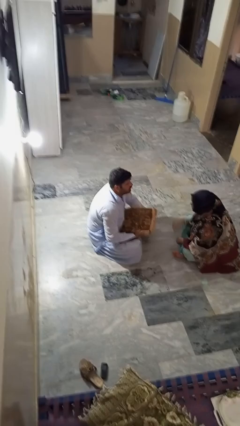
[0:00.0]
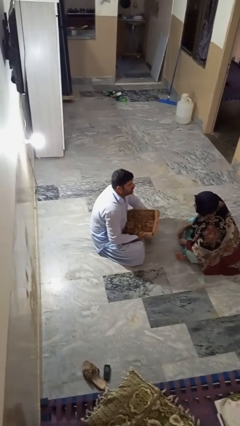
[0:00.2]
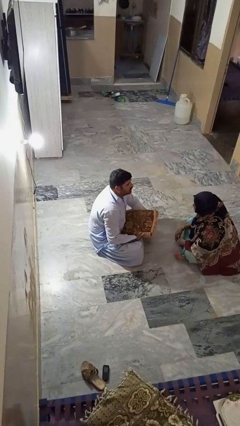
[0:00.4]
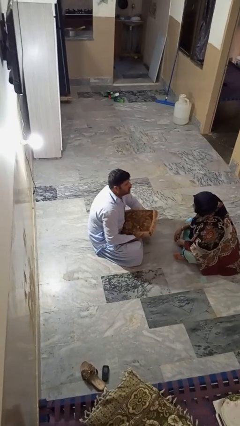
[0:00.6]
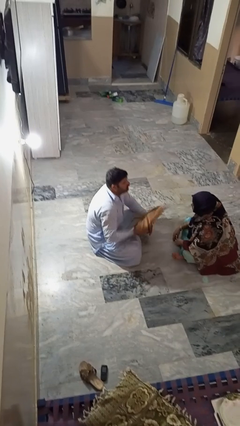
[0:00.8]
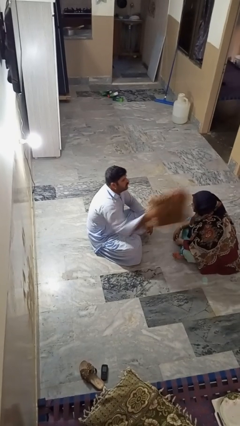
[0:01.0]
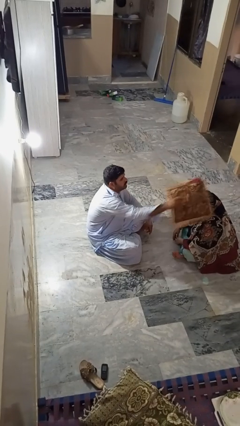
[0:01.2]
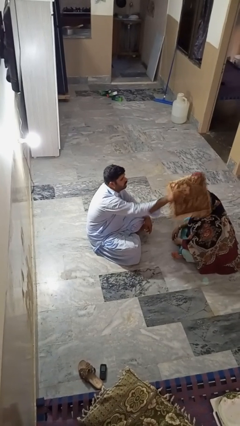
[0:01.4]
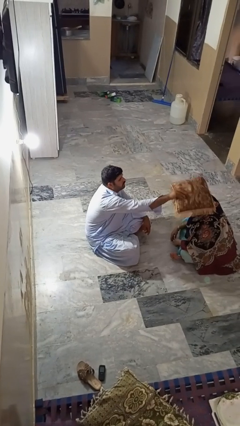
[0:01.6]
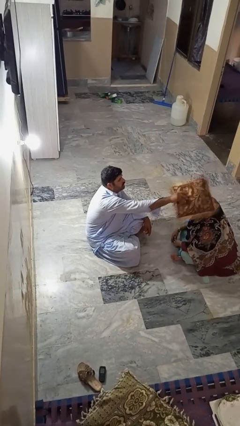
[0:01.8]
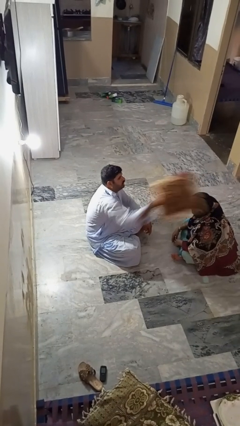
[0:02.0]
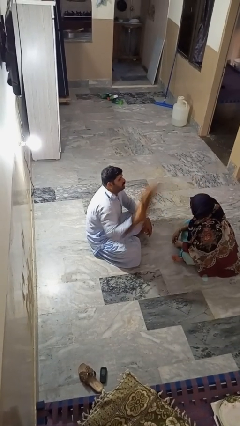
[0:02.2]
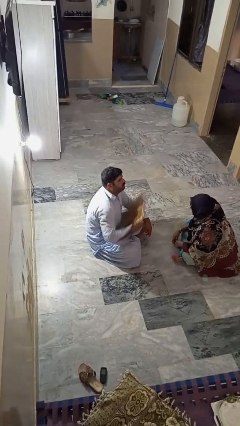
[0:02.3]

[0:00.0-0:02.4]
person hits person with pillow

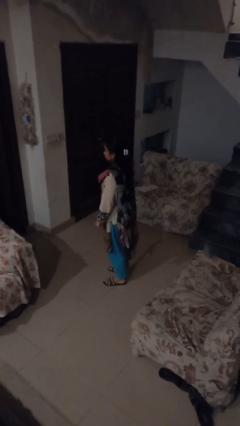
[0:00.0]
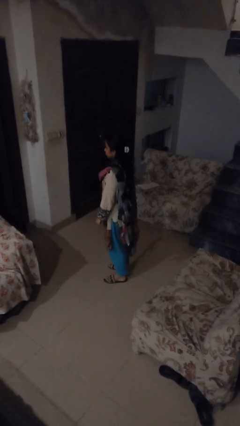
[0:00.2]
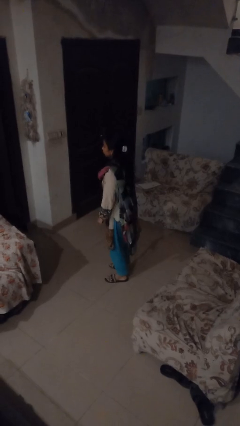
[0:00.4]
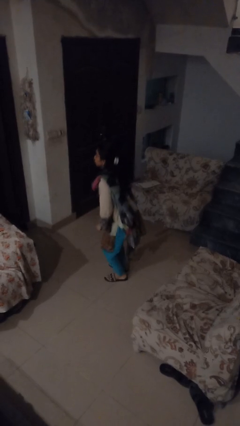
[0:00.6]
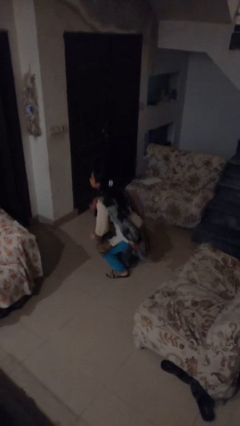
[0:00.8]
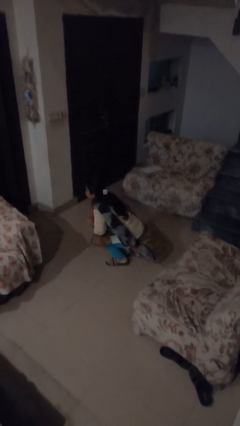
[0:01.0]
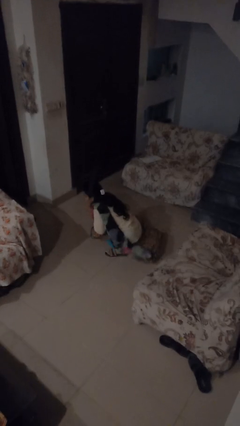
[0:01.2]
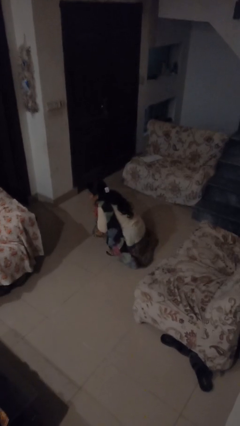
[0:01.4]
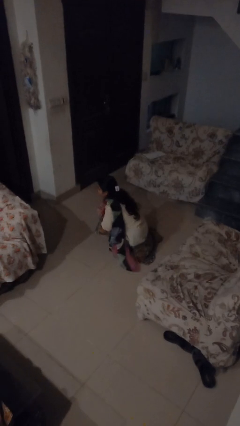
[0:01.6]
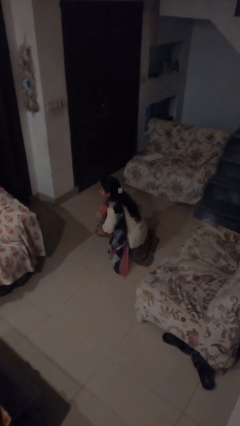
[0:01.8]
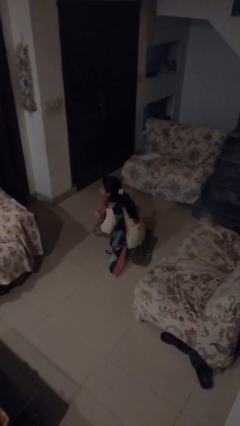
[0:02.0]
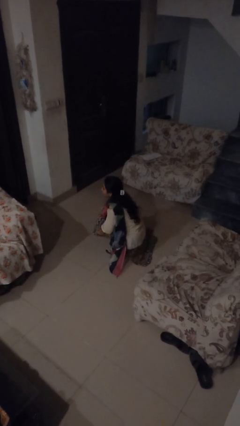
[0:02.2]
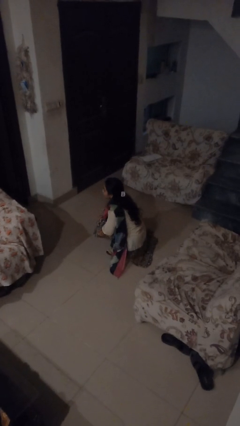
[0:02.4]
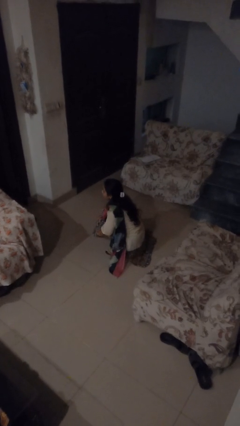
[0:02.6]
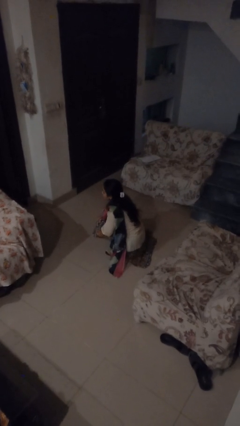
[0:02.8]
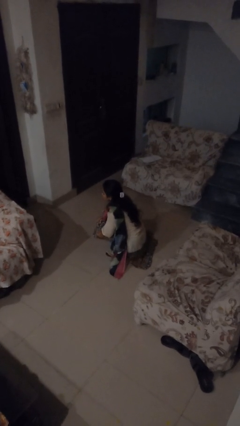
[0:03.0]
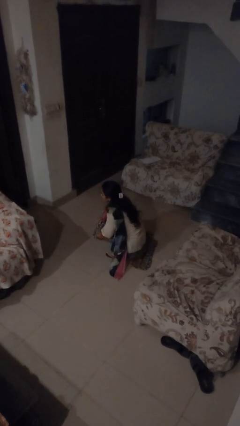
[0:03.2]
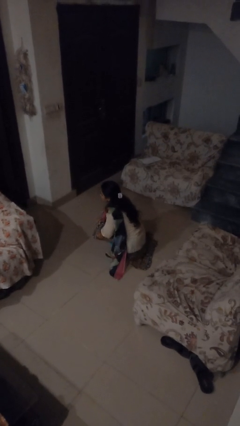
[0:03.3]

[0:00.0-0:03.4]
person squats

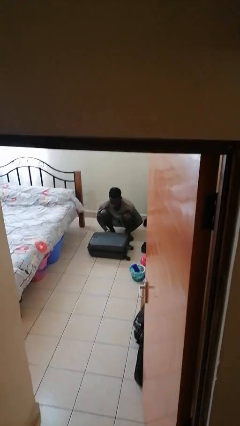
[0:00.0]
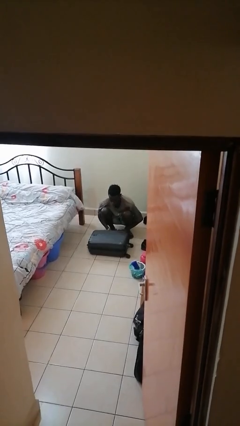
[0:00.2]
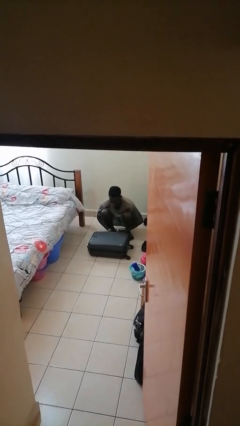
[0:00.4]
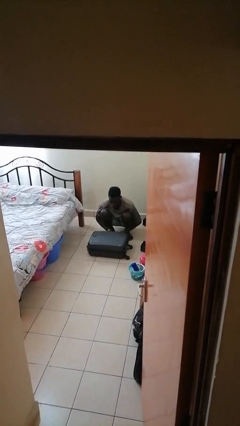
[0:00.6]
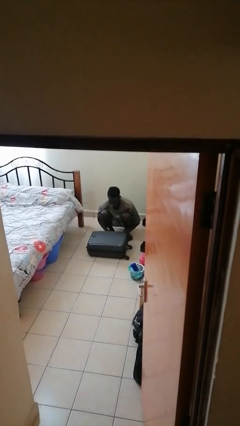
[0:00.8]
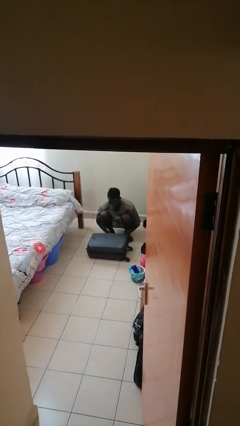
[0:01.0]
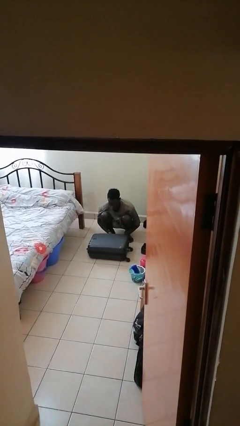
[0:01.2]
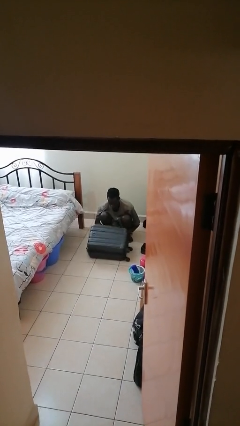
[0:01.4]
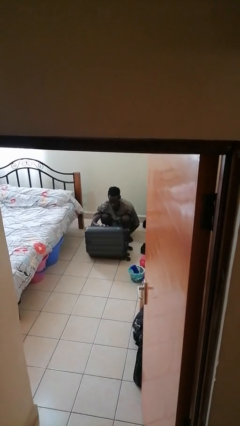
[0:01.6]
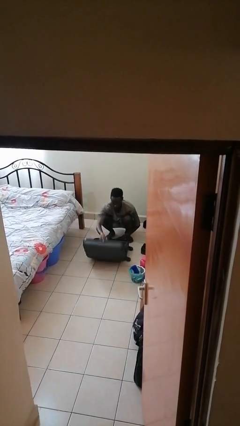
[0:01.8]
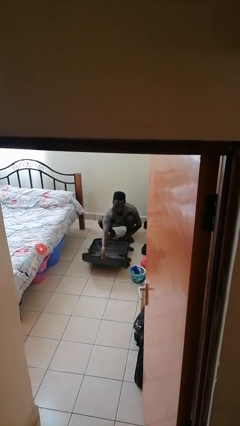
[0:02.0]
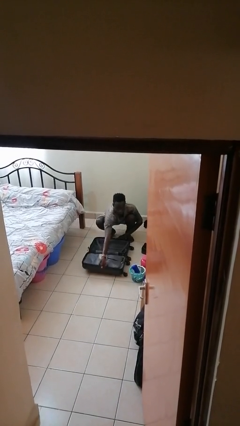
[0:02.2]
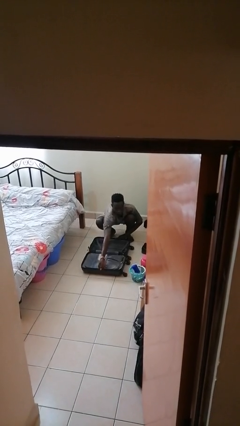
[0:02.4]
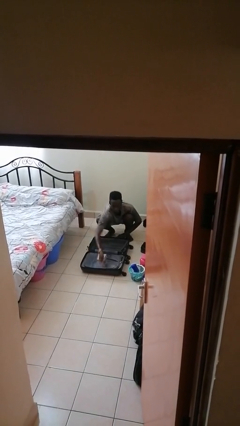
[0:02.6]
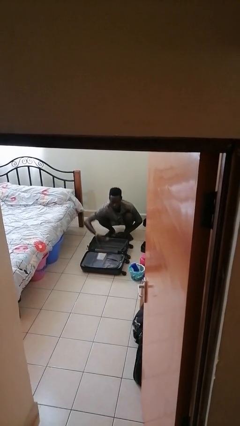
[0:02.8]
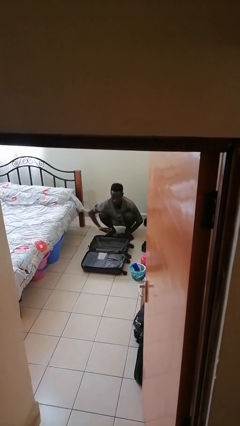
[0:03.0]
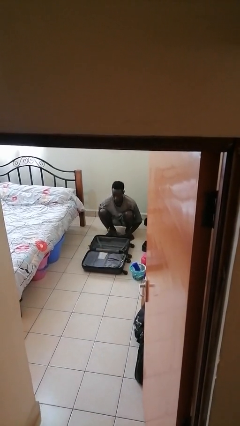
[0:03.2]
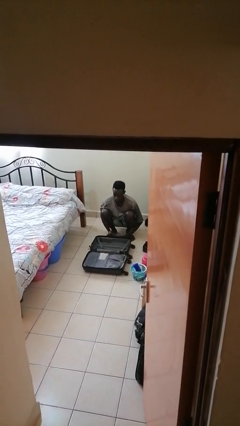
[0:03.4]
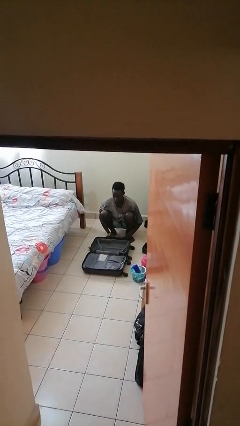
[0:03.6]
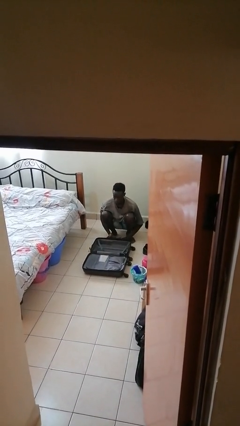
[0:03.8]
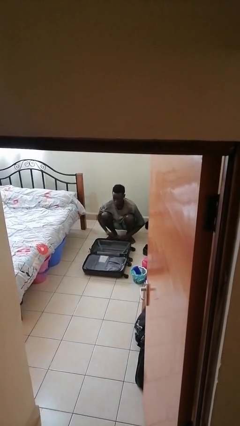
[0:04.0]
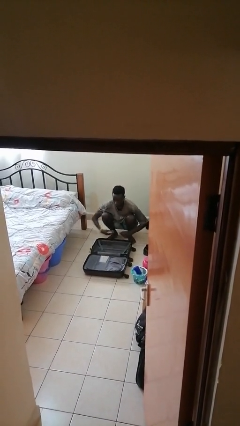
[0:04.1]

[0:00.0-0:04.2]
person opens suitcase

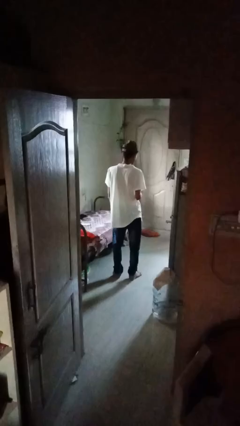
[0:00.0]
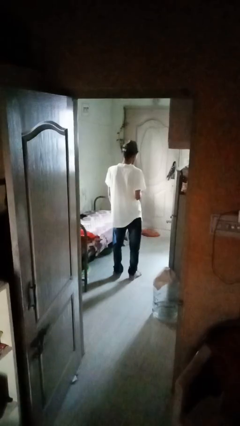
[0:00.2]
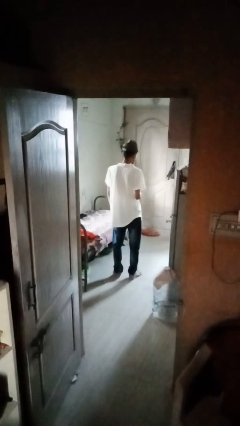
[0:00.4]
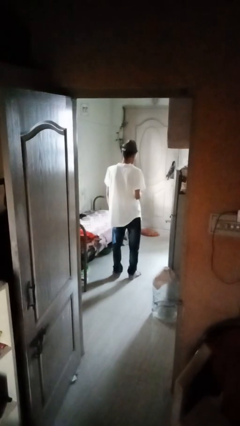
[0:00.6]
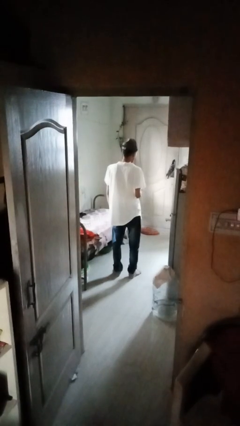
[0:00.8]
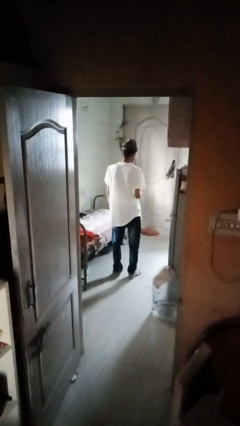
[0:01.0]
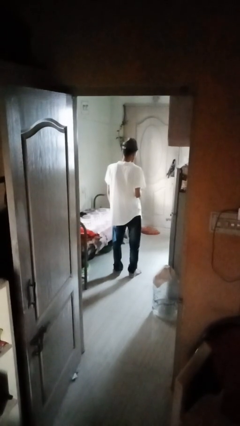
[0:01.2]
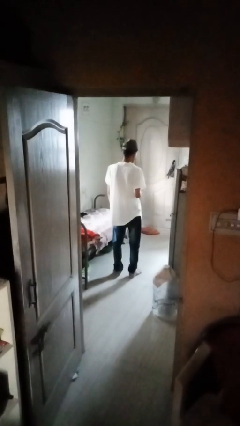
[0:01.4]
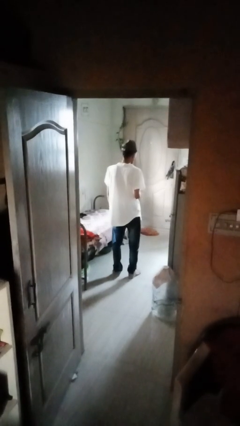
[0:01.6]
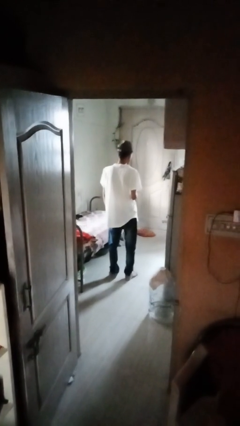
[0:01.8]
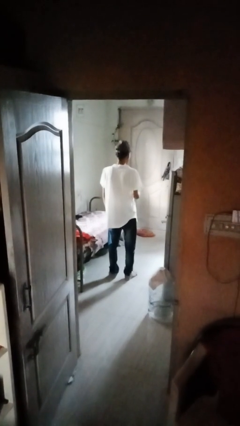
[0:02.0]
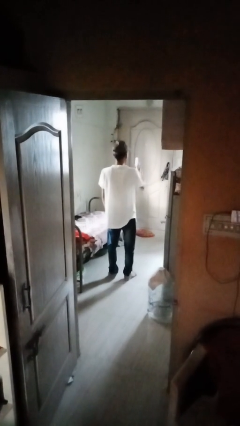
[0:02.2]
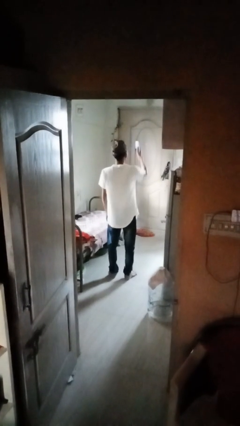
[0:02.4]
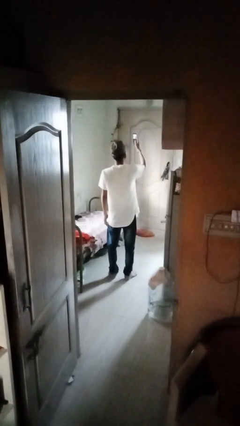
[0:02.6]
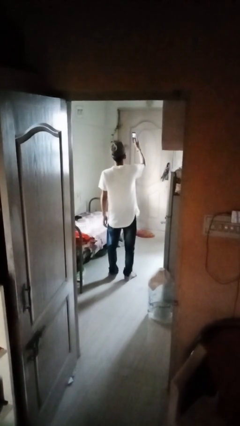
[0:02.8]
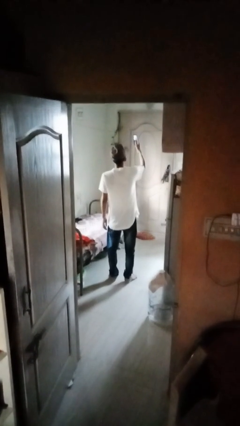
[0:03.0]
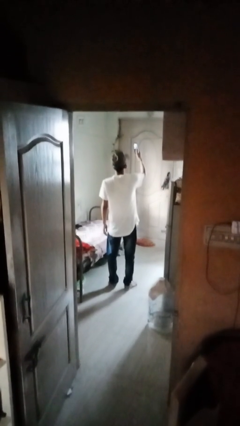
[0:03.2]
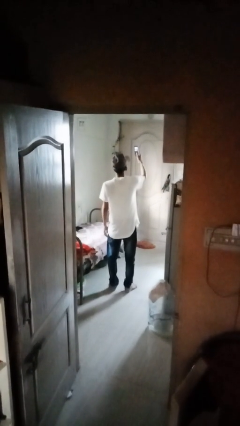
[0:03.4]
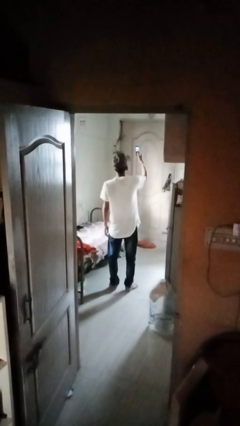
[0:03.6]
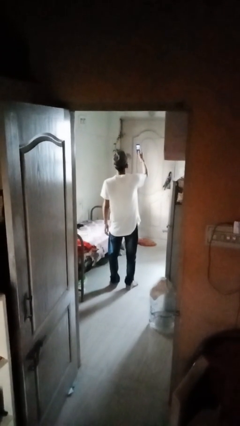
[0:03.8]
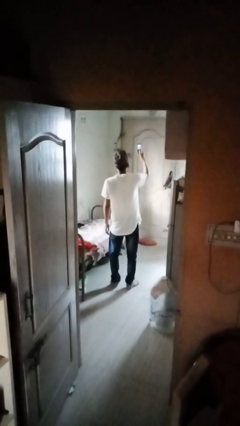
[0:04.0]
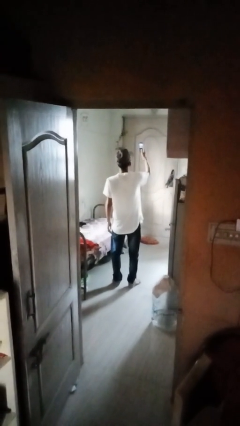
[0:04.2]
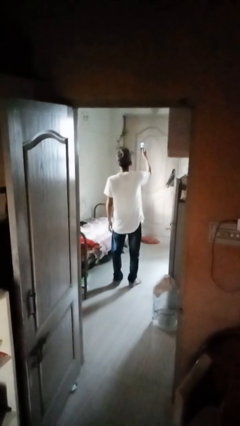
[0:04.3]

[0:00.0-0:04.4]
person takes selfie

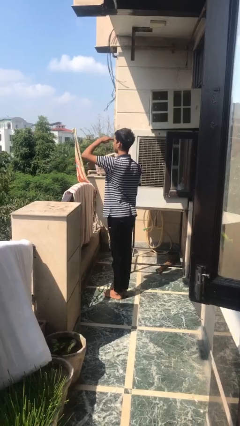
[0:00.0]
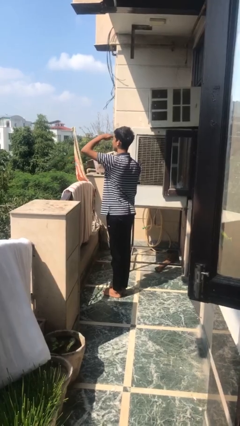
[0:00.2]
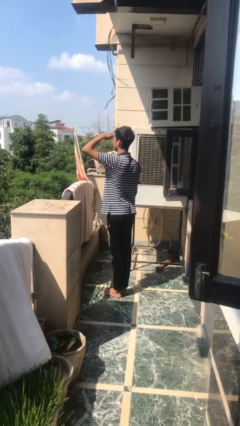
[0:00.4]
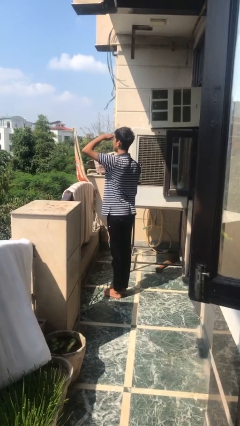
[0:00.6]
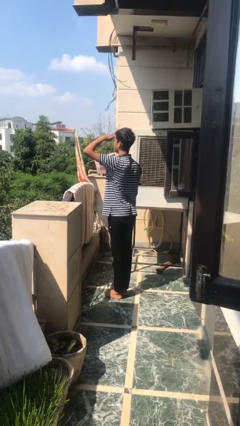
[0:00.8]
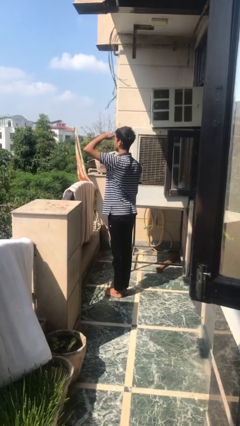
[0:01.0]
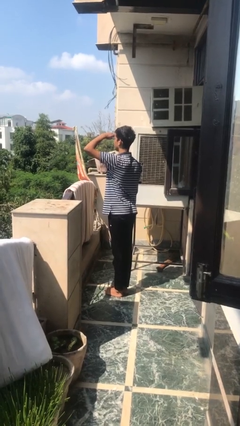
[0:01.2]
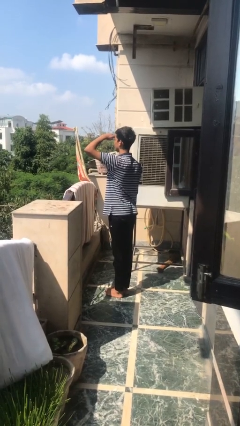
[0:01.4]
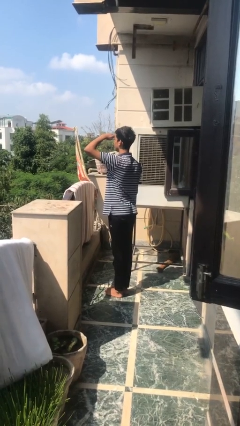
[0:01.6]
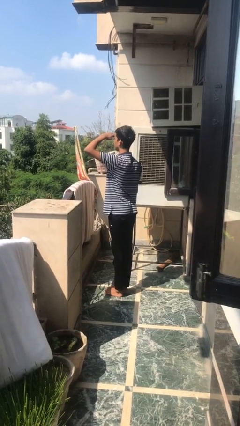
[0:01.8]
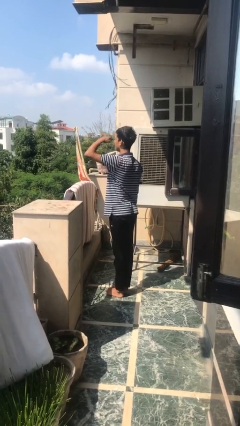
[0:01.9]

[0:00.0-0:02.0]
person shades eyes

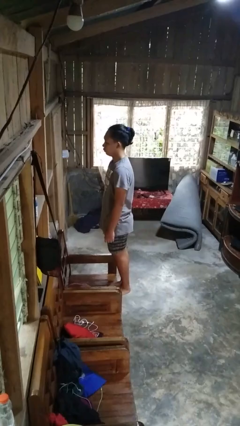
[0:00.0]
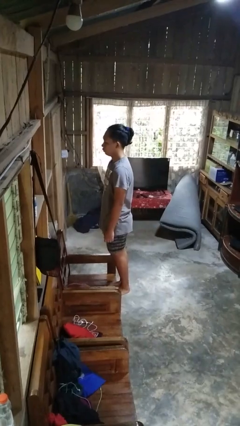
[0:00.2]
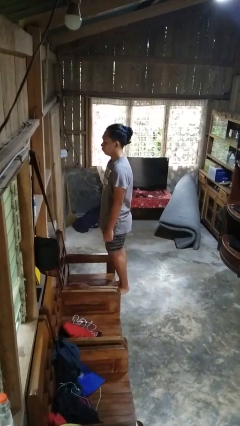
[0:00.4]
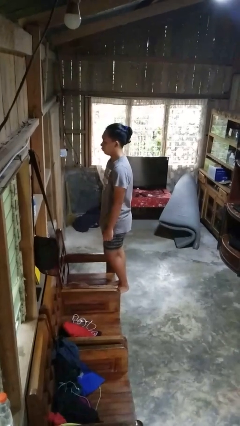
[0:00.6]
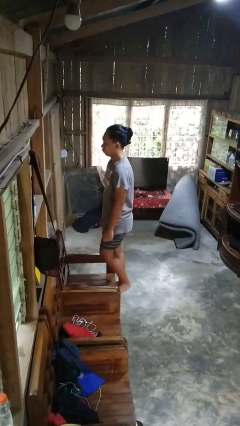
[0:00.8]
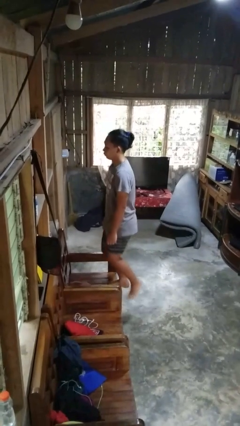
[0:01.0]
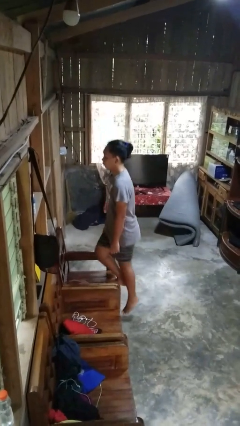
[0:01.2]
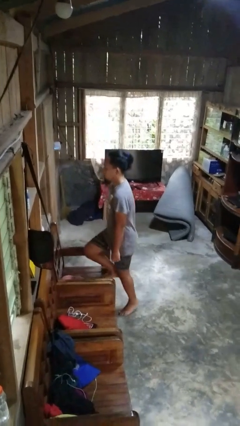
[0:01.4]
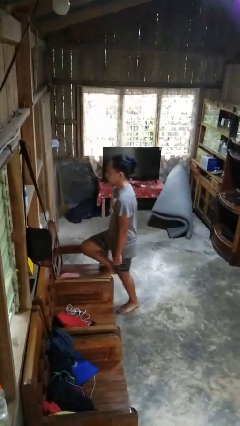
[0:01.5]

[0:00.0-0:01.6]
person climbs off chair
